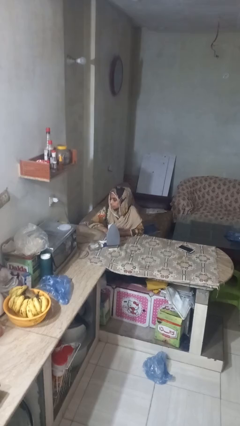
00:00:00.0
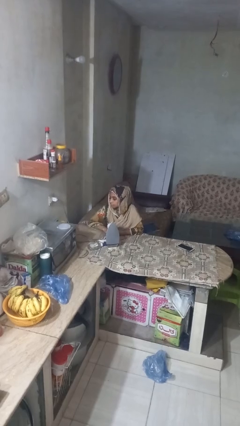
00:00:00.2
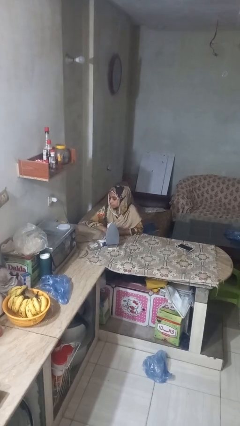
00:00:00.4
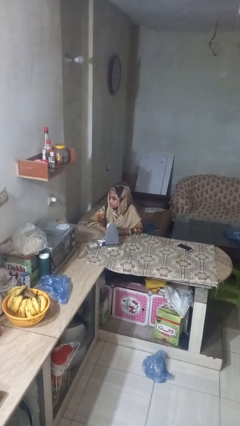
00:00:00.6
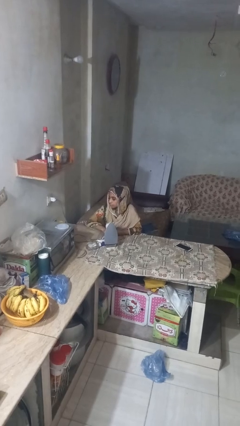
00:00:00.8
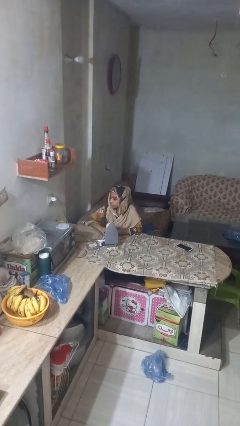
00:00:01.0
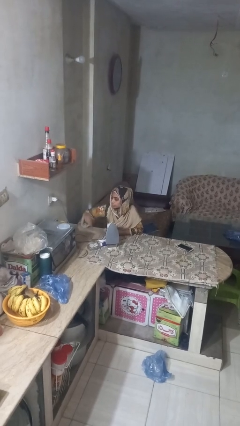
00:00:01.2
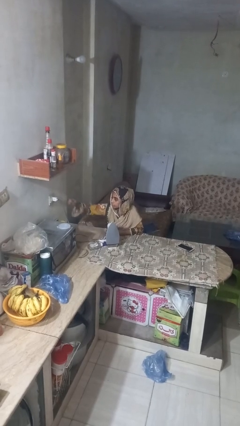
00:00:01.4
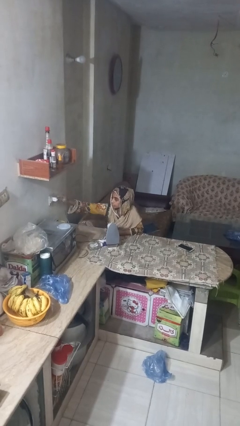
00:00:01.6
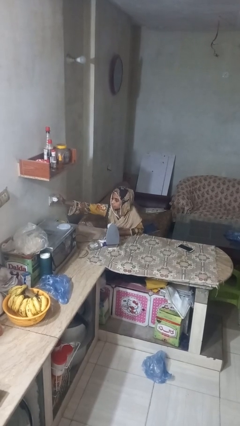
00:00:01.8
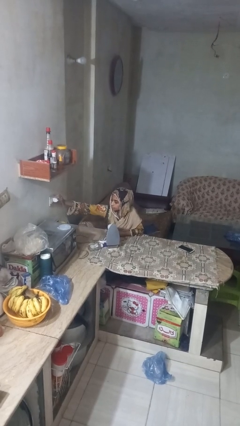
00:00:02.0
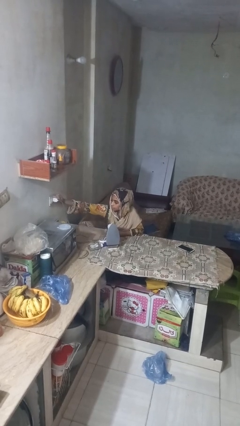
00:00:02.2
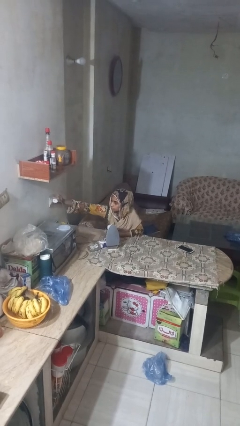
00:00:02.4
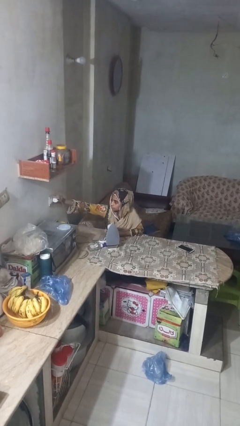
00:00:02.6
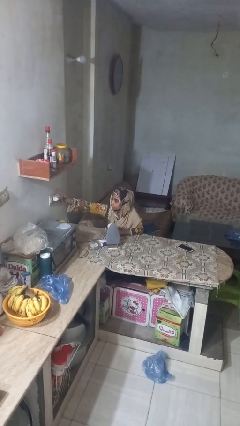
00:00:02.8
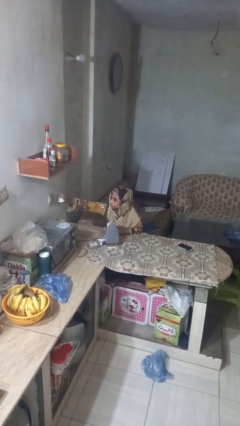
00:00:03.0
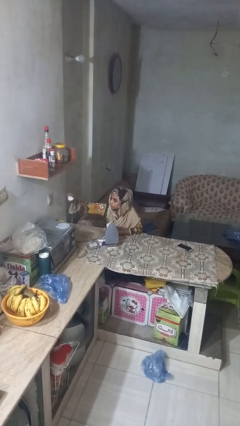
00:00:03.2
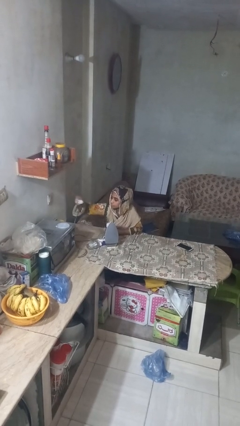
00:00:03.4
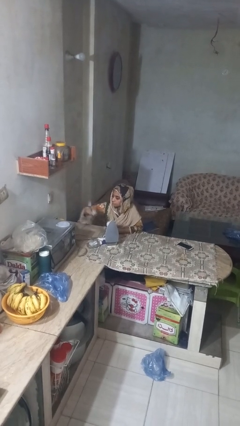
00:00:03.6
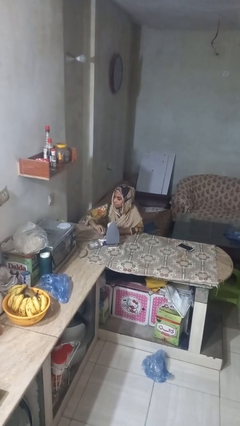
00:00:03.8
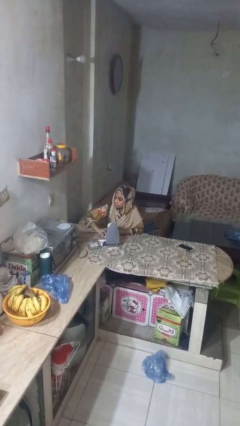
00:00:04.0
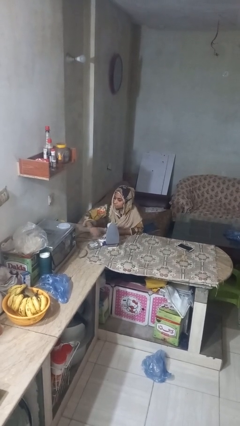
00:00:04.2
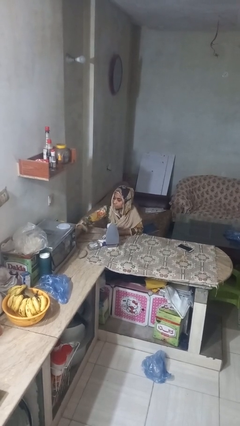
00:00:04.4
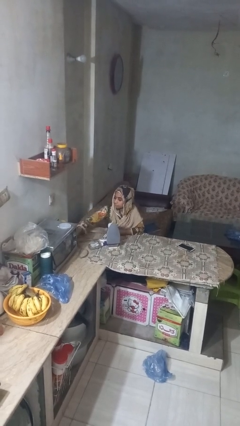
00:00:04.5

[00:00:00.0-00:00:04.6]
person unplugs from electrical socket

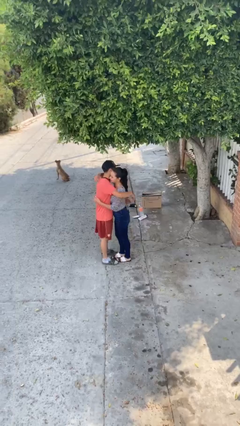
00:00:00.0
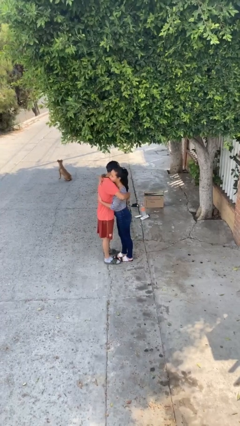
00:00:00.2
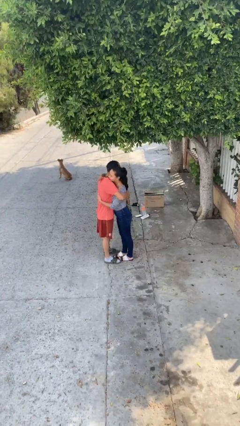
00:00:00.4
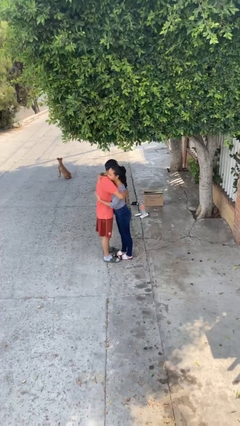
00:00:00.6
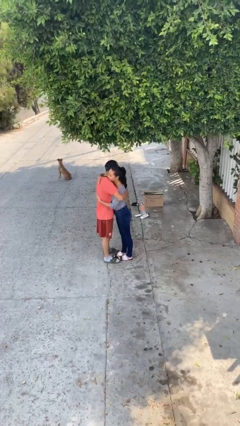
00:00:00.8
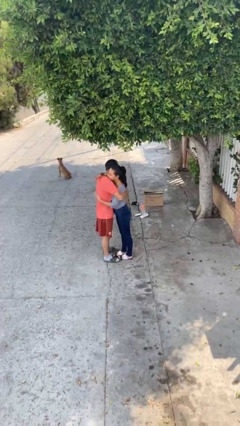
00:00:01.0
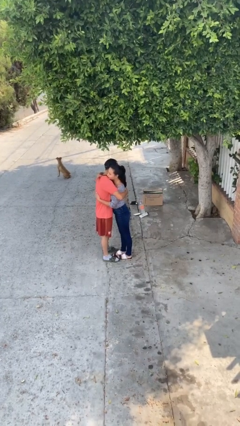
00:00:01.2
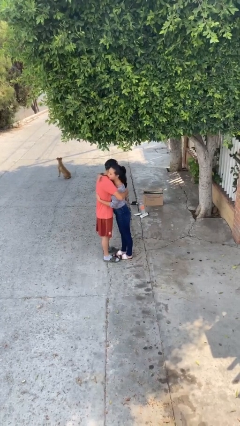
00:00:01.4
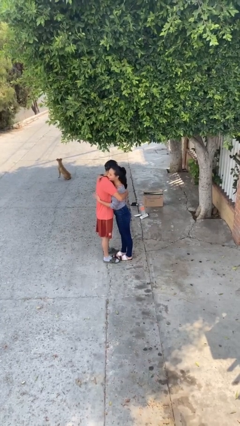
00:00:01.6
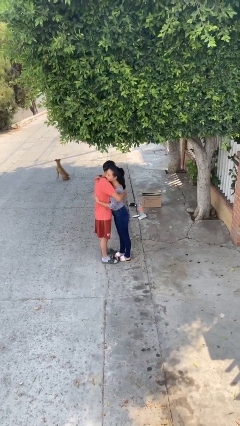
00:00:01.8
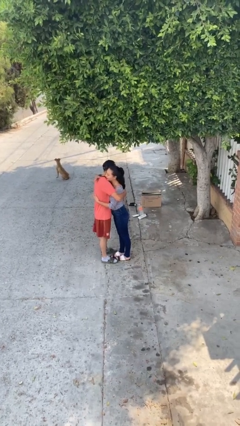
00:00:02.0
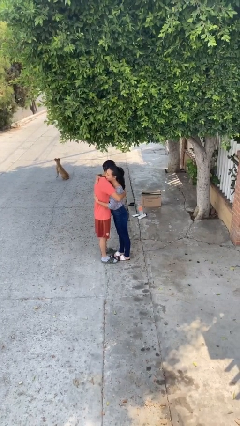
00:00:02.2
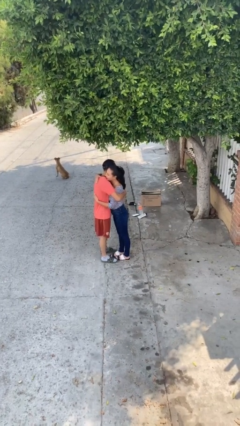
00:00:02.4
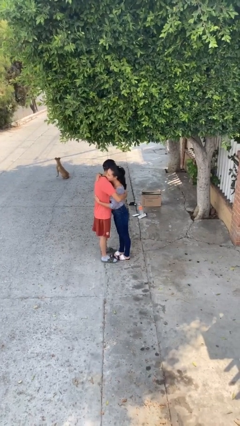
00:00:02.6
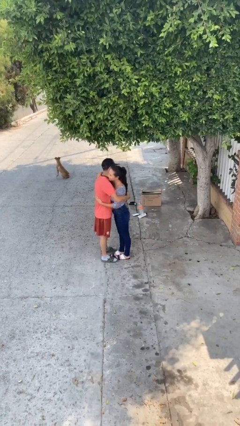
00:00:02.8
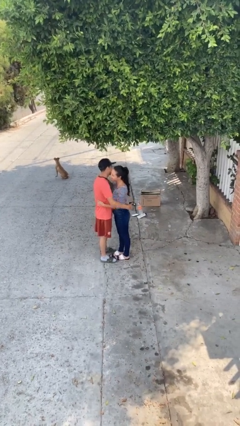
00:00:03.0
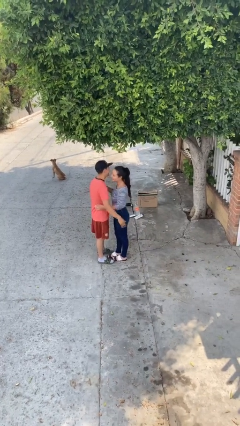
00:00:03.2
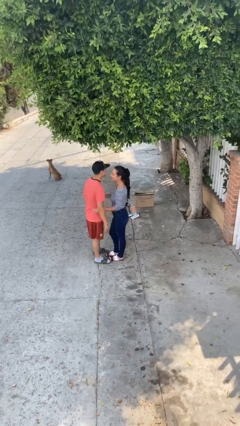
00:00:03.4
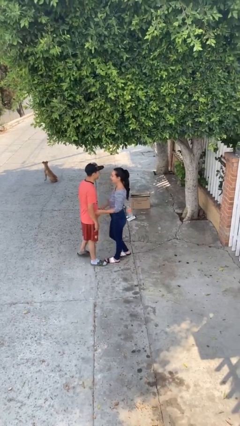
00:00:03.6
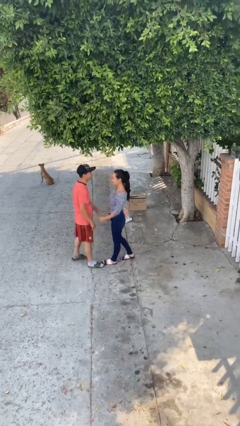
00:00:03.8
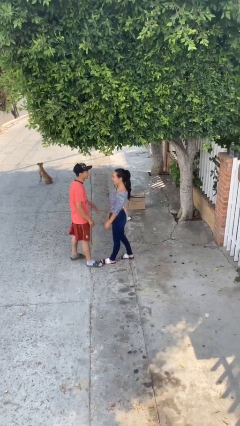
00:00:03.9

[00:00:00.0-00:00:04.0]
person embraces person

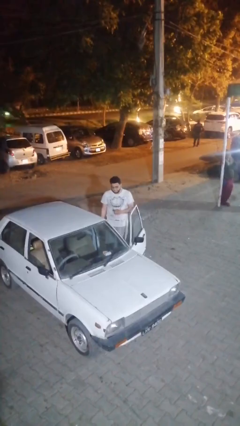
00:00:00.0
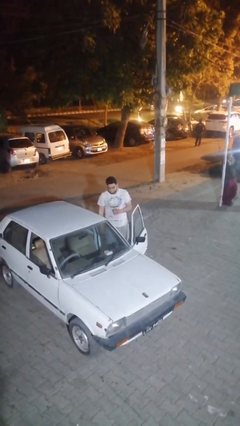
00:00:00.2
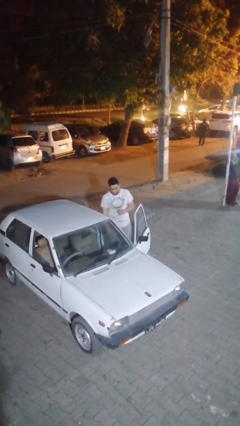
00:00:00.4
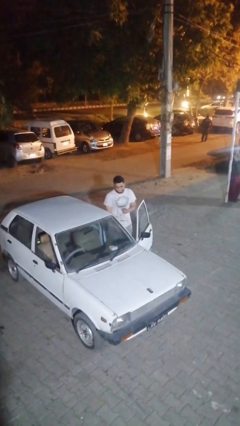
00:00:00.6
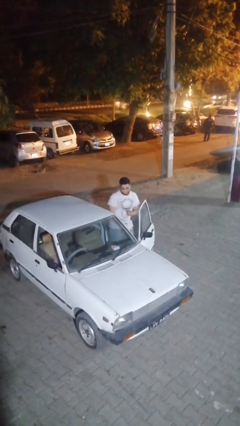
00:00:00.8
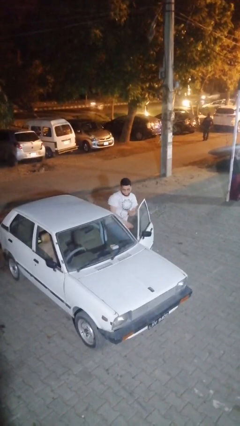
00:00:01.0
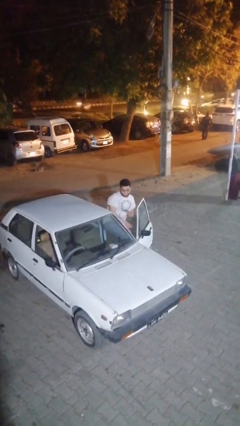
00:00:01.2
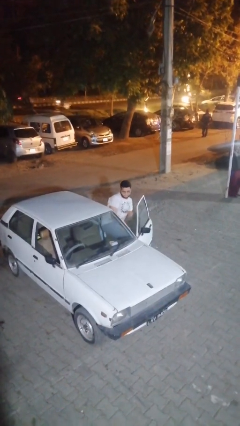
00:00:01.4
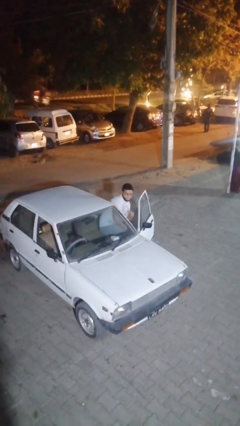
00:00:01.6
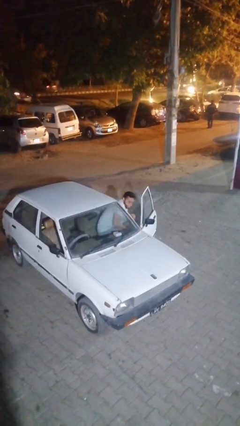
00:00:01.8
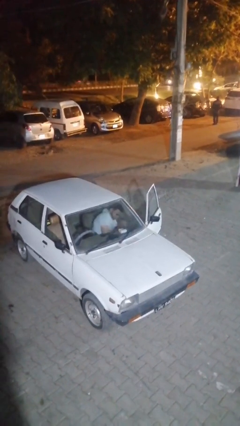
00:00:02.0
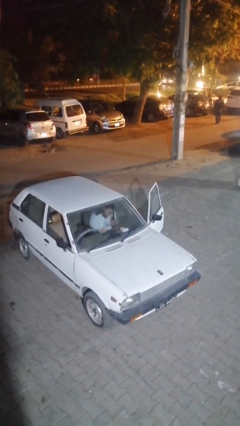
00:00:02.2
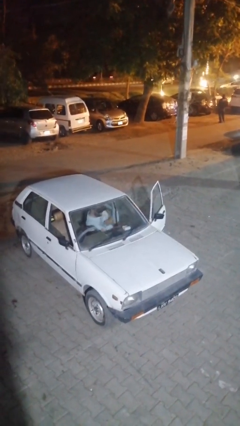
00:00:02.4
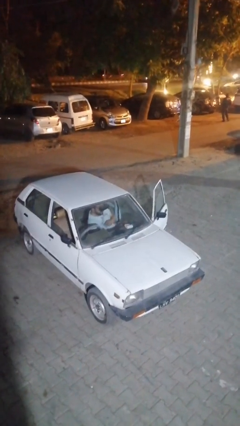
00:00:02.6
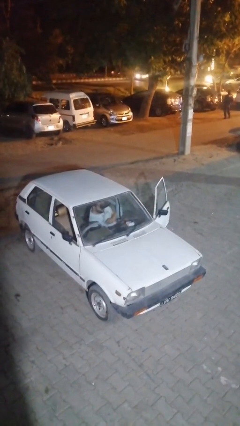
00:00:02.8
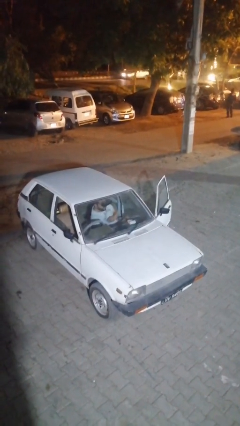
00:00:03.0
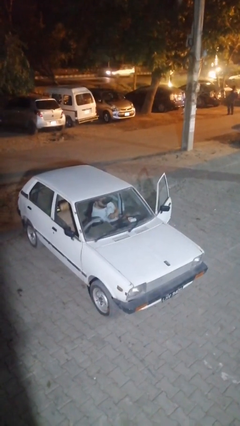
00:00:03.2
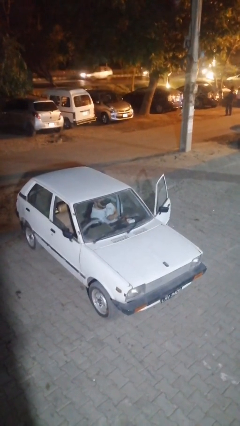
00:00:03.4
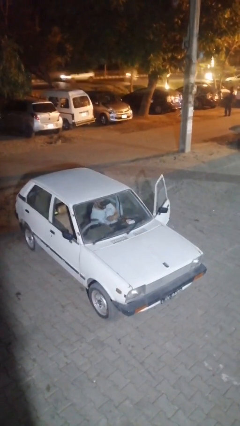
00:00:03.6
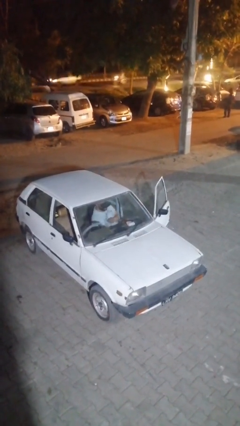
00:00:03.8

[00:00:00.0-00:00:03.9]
person enters car

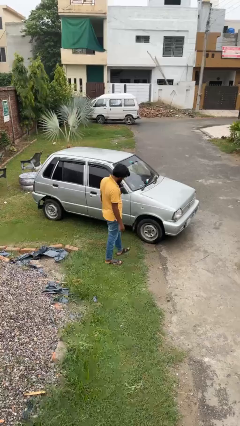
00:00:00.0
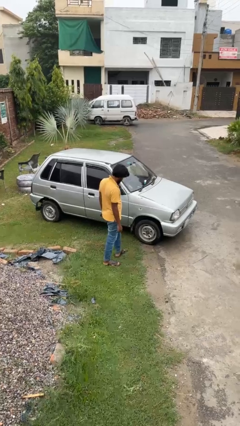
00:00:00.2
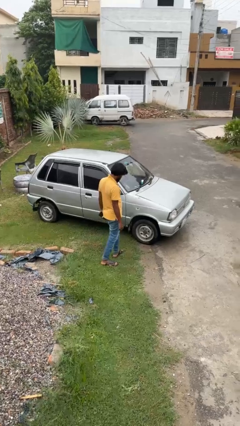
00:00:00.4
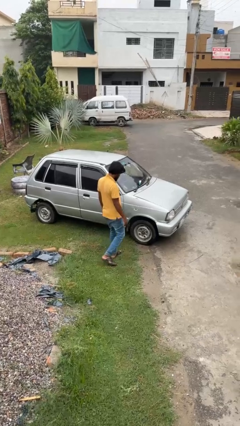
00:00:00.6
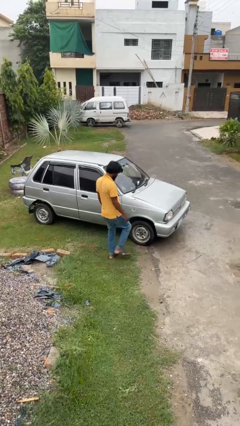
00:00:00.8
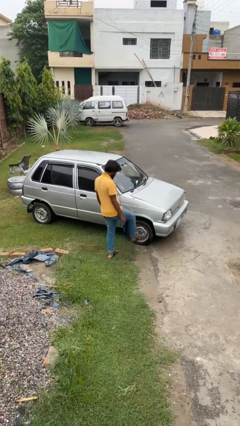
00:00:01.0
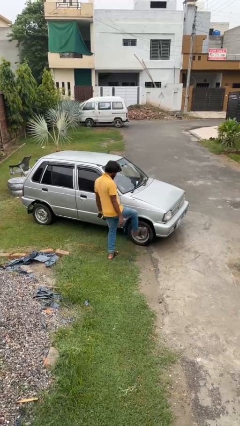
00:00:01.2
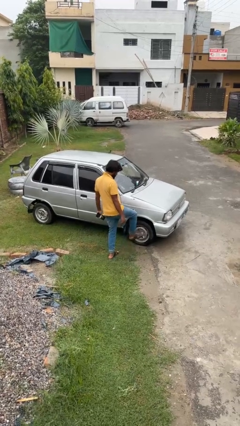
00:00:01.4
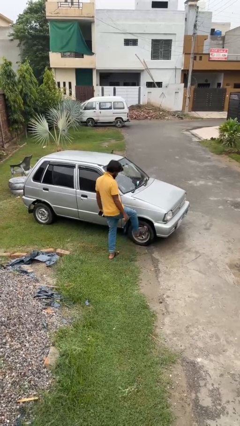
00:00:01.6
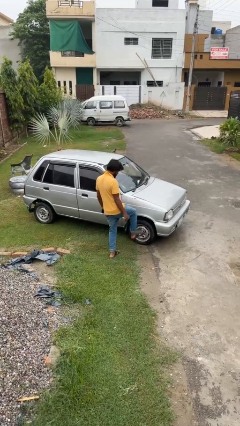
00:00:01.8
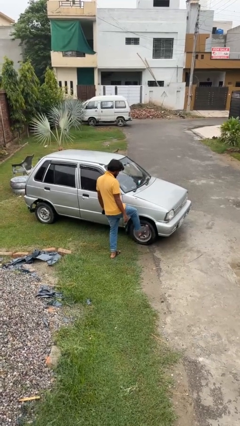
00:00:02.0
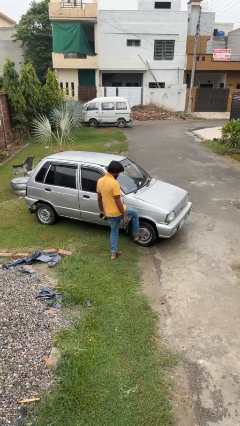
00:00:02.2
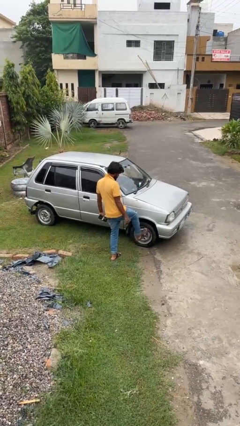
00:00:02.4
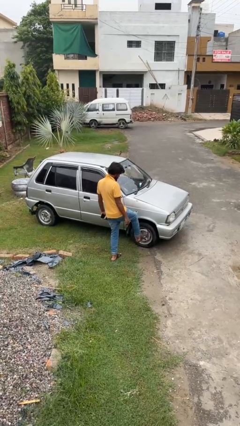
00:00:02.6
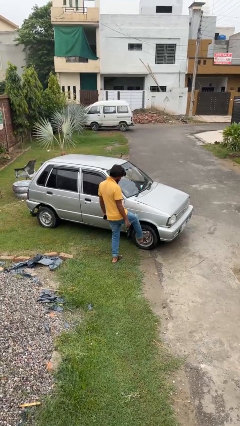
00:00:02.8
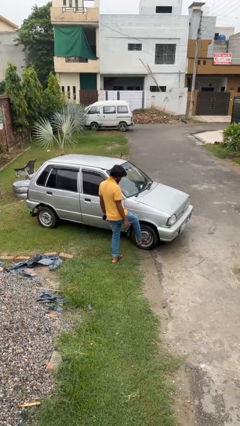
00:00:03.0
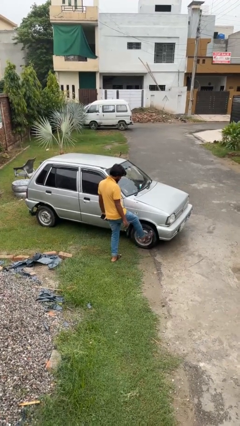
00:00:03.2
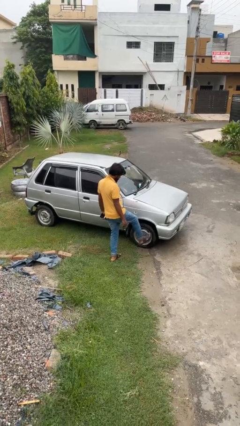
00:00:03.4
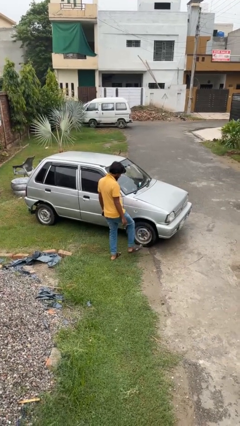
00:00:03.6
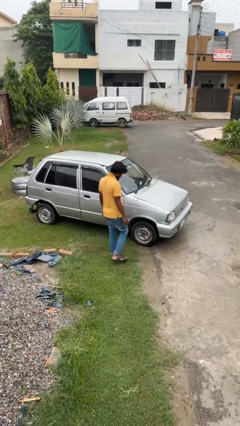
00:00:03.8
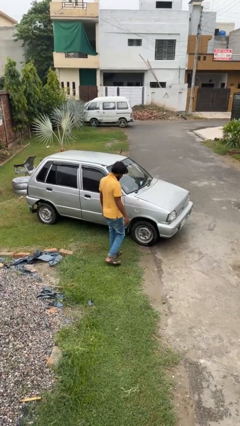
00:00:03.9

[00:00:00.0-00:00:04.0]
person kicks car tires

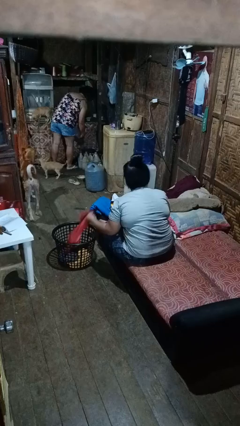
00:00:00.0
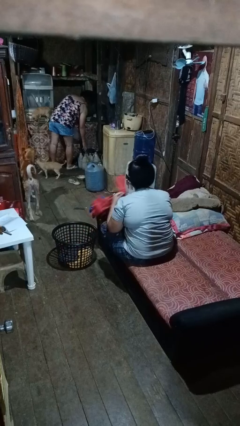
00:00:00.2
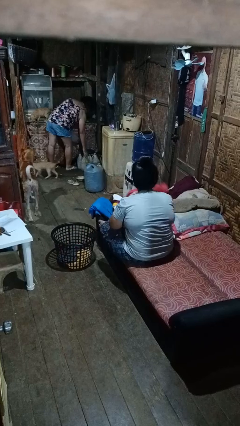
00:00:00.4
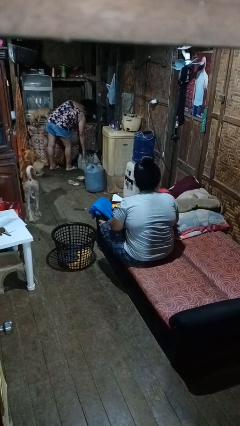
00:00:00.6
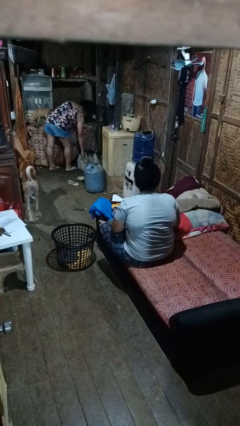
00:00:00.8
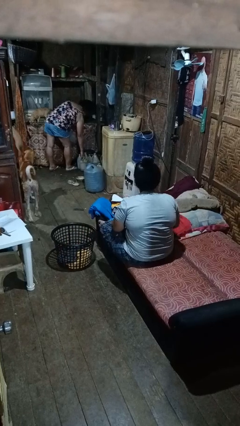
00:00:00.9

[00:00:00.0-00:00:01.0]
person takes object from basket

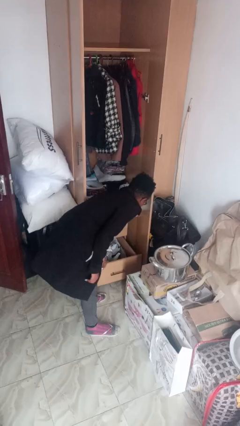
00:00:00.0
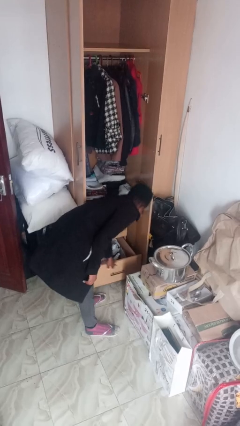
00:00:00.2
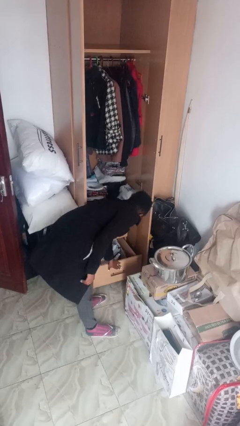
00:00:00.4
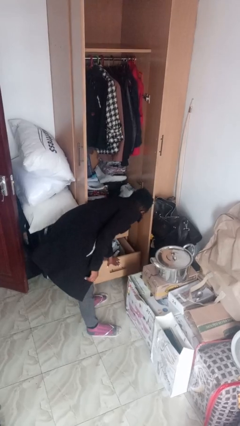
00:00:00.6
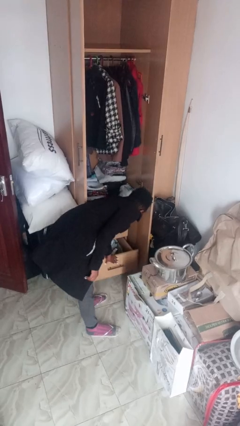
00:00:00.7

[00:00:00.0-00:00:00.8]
person closes dresser drawer
